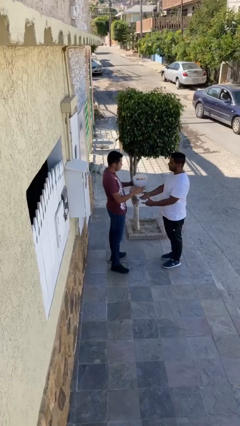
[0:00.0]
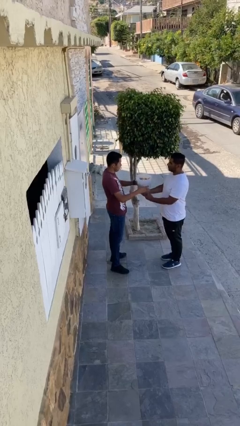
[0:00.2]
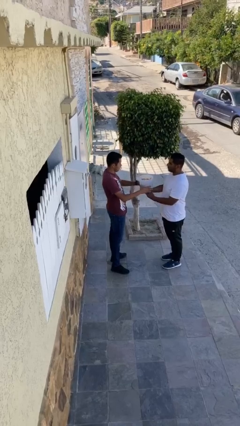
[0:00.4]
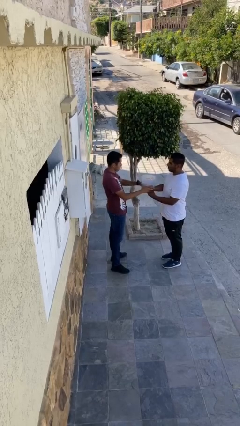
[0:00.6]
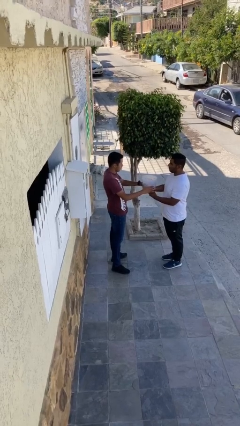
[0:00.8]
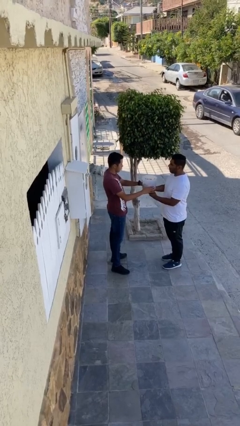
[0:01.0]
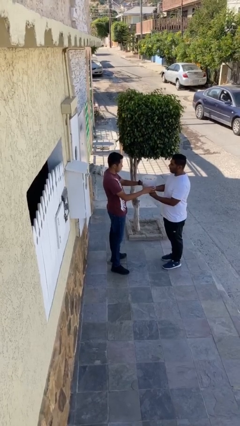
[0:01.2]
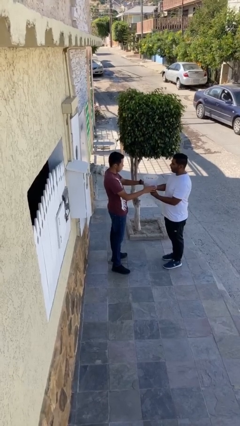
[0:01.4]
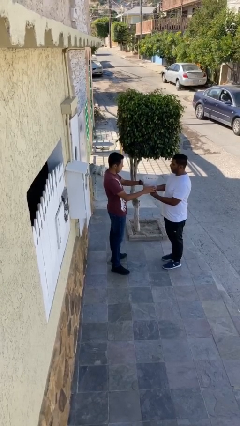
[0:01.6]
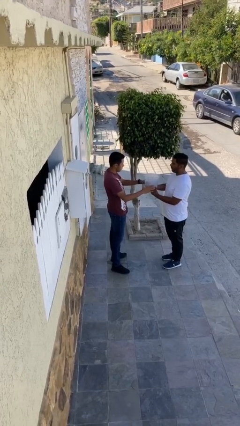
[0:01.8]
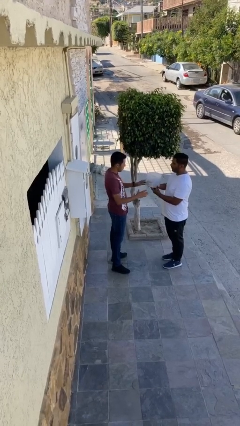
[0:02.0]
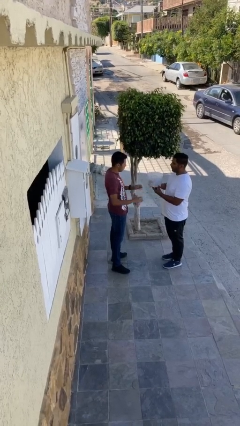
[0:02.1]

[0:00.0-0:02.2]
person transfers object to person

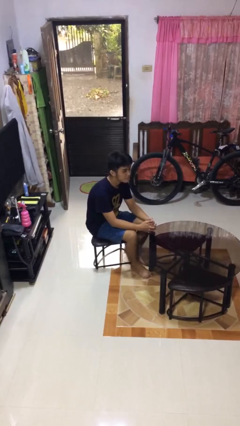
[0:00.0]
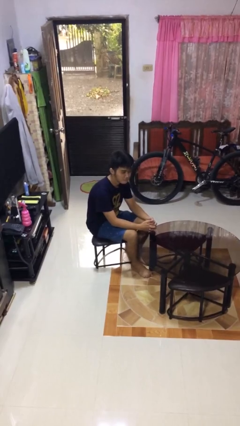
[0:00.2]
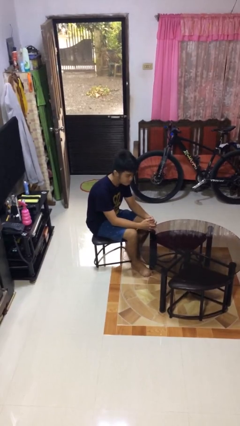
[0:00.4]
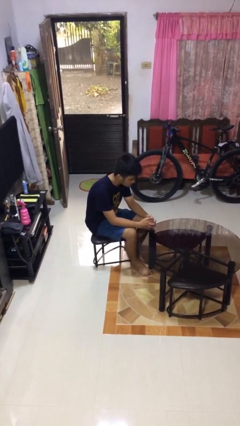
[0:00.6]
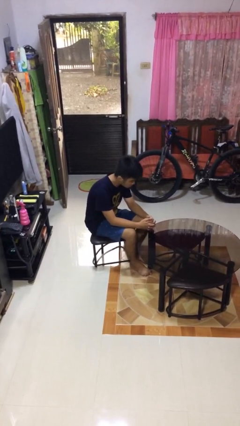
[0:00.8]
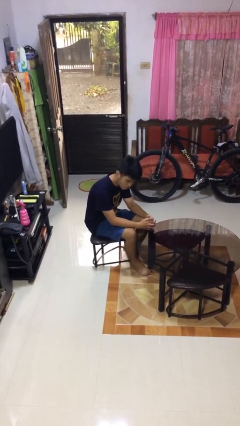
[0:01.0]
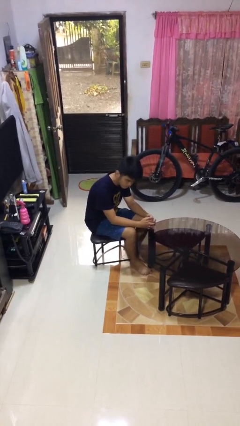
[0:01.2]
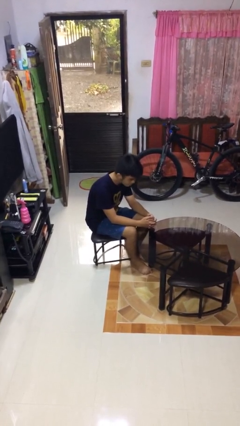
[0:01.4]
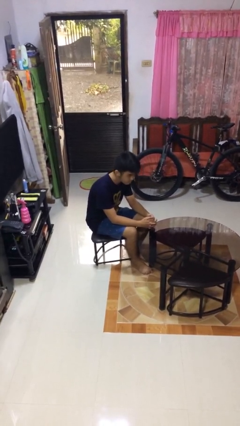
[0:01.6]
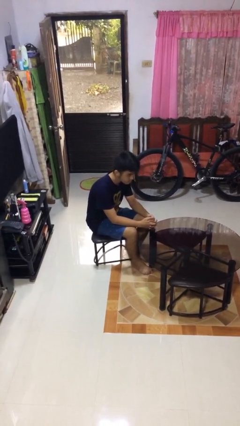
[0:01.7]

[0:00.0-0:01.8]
person shakes head

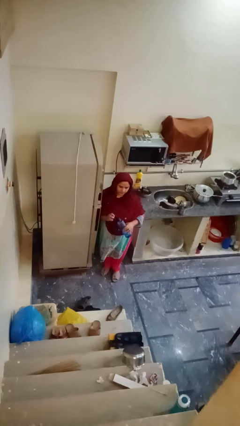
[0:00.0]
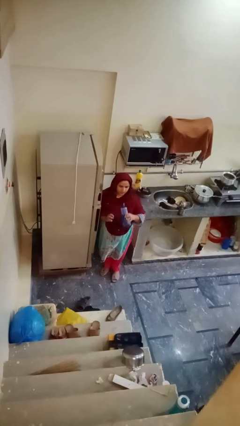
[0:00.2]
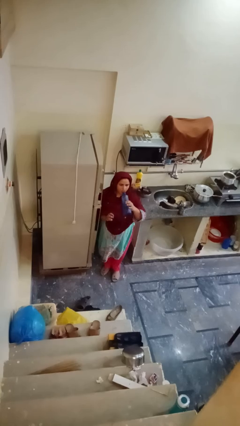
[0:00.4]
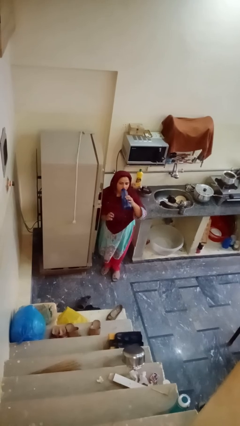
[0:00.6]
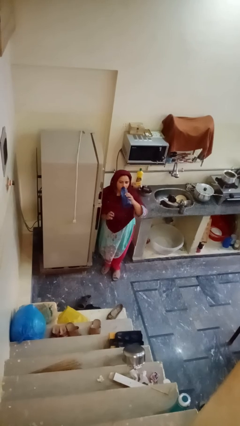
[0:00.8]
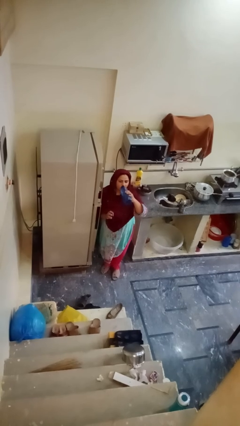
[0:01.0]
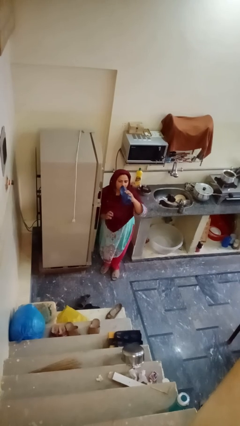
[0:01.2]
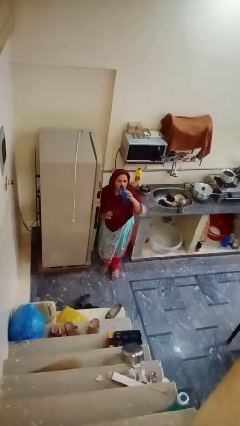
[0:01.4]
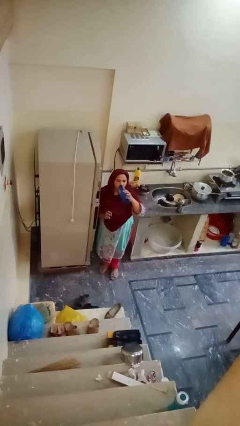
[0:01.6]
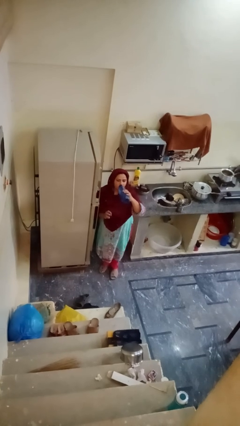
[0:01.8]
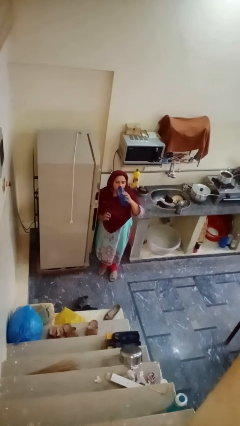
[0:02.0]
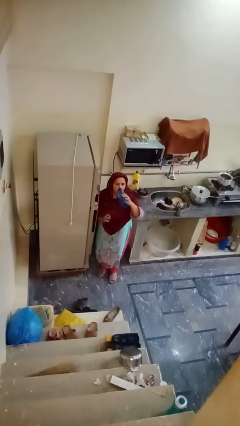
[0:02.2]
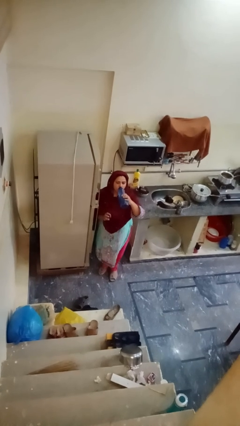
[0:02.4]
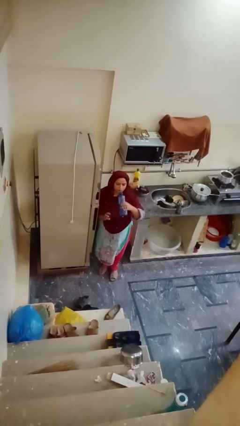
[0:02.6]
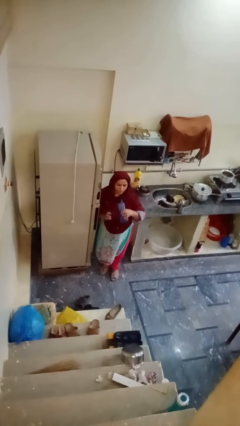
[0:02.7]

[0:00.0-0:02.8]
person drinks from bottle

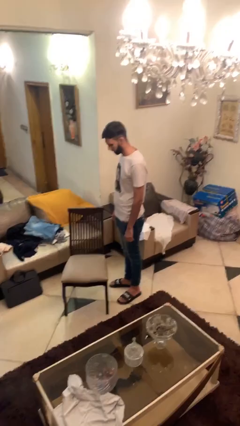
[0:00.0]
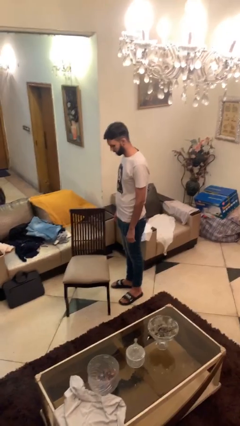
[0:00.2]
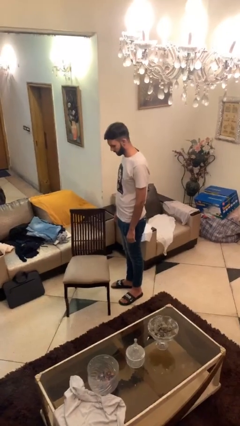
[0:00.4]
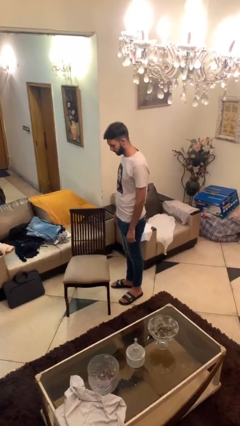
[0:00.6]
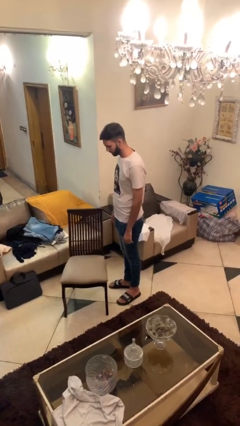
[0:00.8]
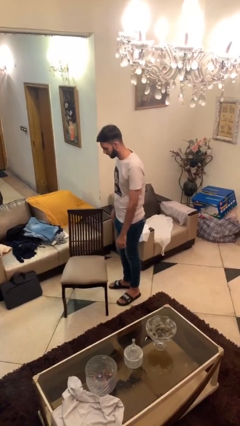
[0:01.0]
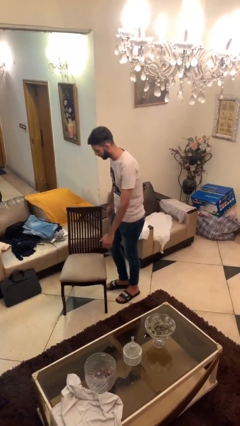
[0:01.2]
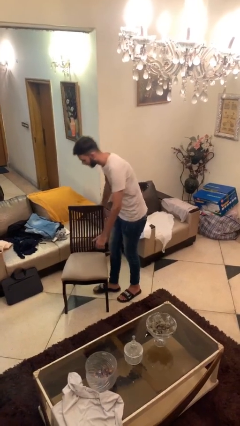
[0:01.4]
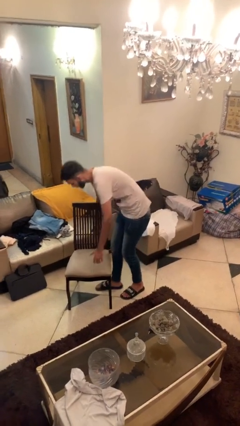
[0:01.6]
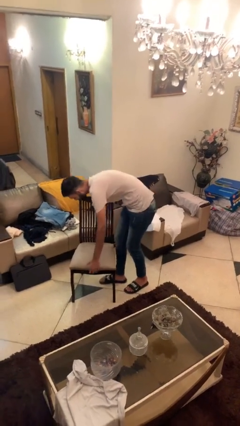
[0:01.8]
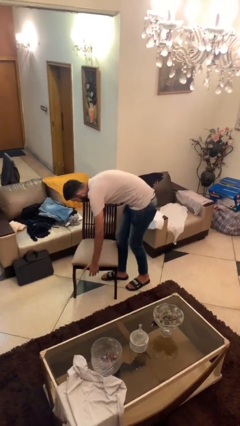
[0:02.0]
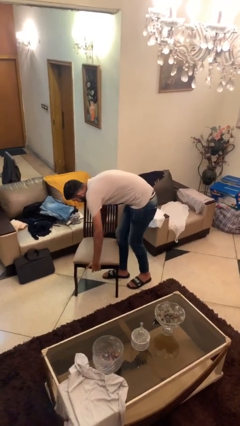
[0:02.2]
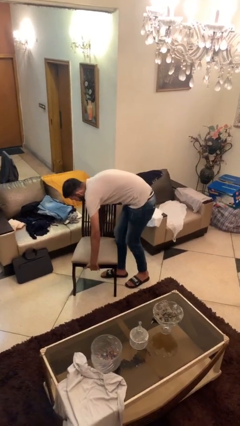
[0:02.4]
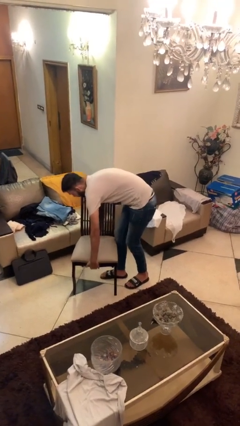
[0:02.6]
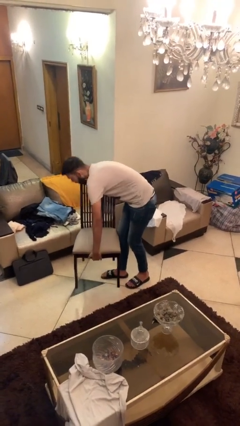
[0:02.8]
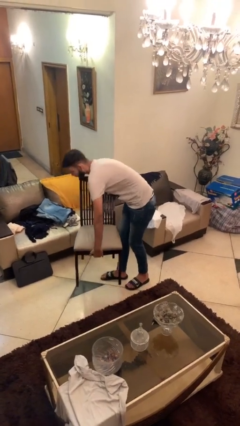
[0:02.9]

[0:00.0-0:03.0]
person picks up object from floor

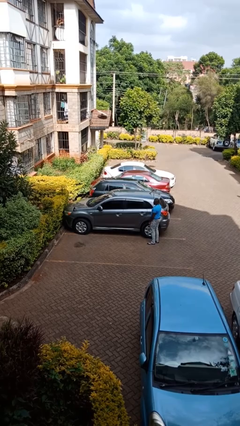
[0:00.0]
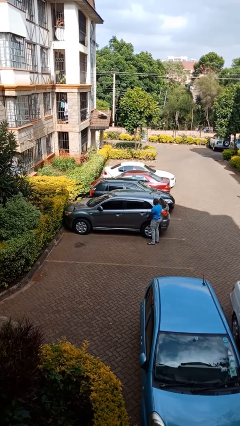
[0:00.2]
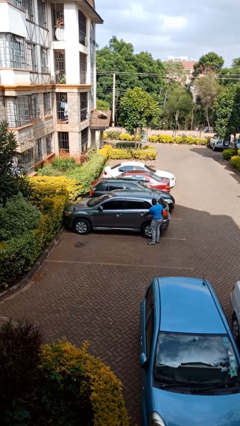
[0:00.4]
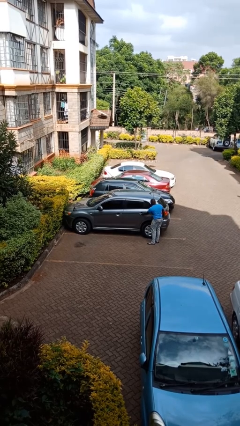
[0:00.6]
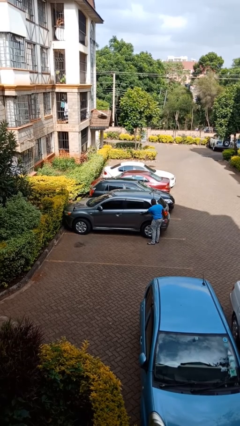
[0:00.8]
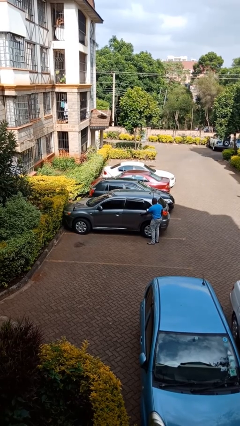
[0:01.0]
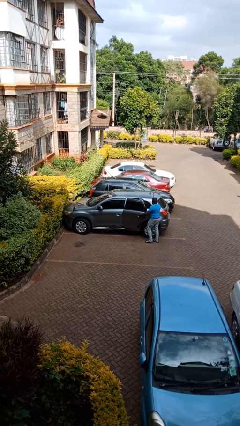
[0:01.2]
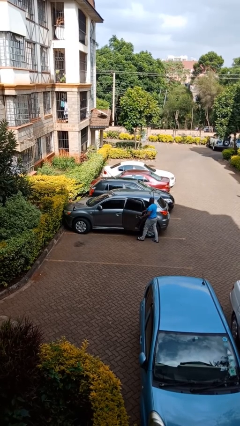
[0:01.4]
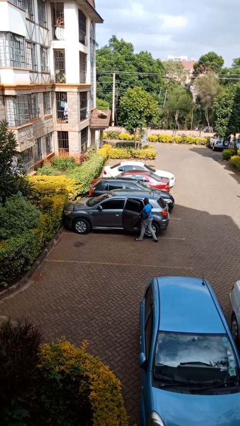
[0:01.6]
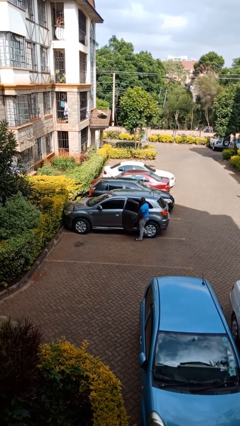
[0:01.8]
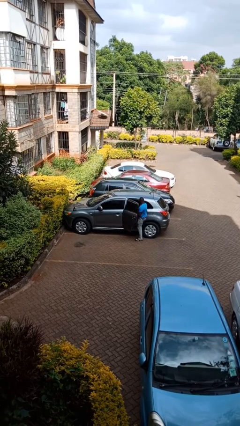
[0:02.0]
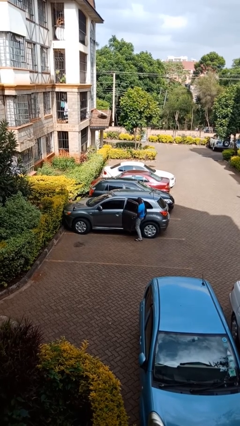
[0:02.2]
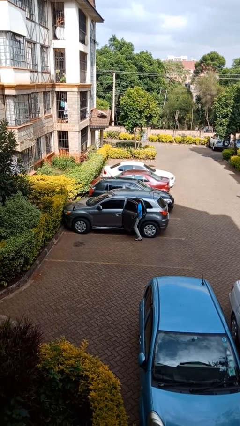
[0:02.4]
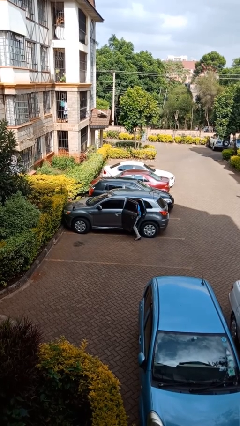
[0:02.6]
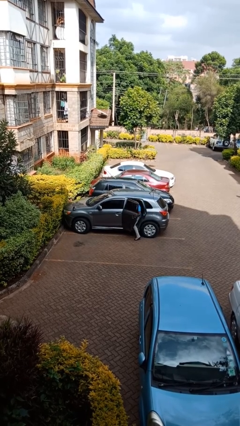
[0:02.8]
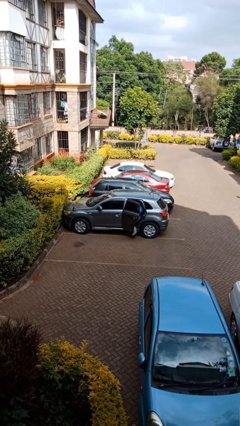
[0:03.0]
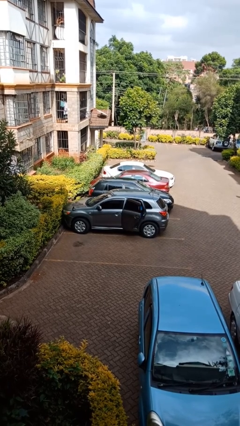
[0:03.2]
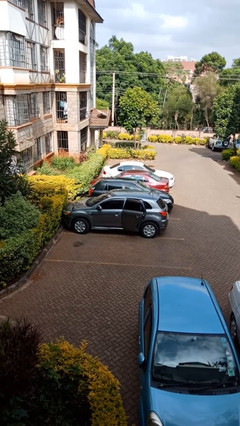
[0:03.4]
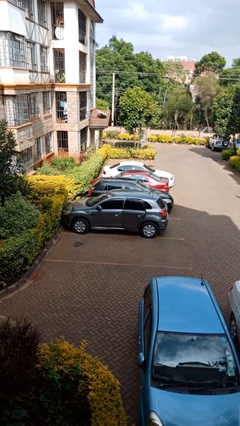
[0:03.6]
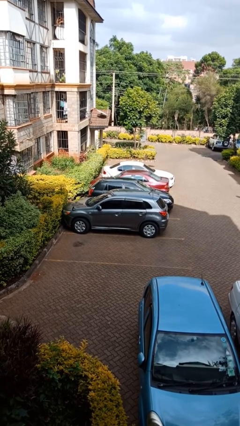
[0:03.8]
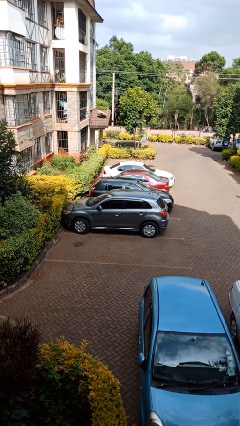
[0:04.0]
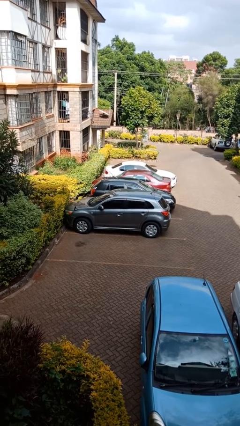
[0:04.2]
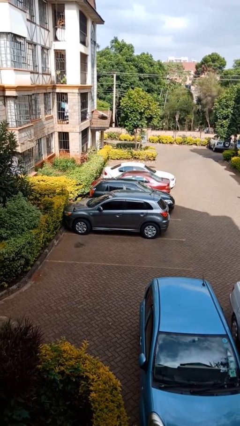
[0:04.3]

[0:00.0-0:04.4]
car picks up person

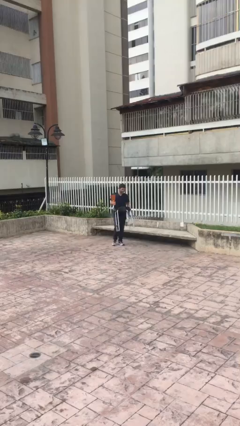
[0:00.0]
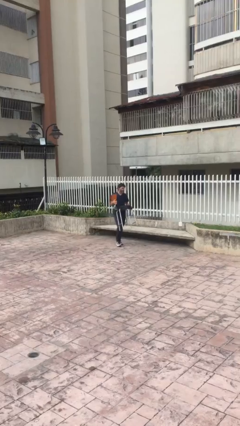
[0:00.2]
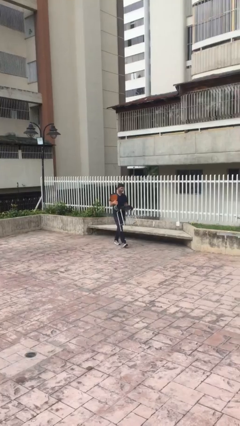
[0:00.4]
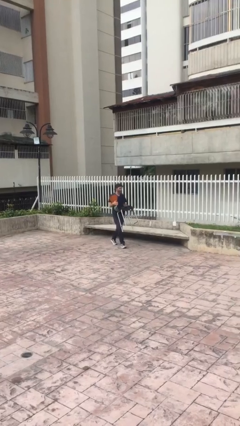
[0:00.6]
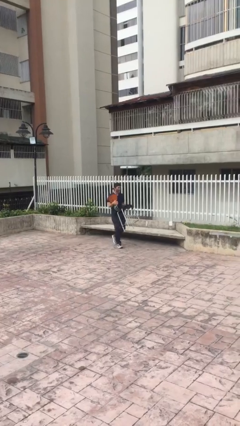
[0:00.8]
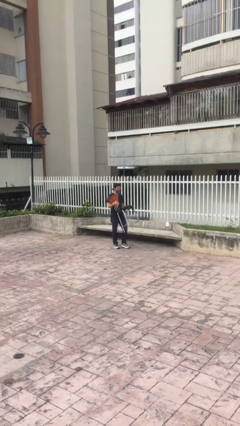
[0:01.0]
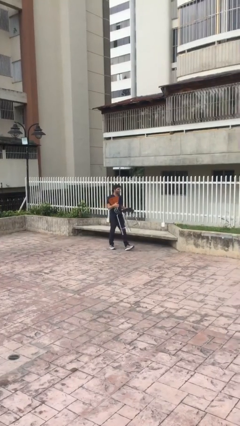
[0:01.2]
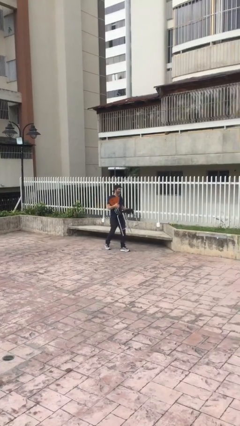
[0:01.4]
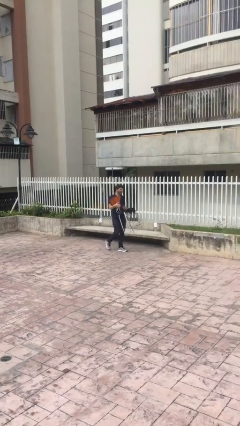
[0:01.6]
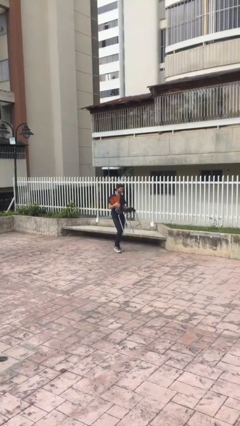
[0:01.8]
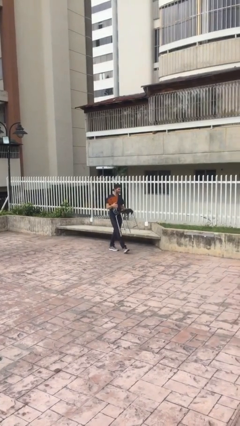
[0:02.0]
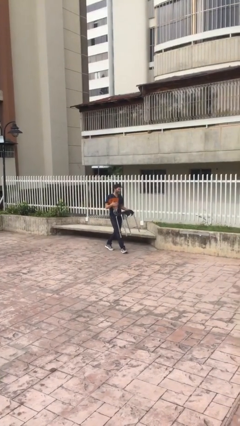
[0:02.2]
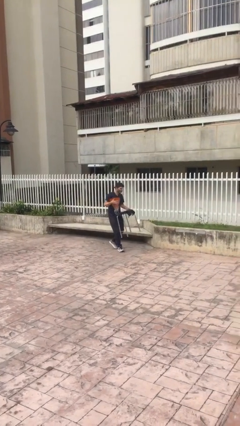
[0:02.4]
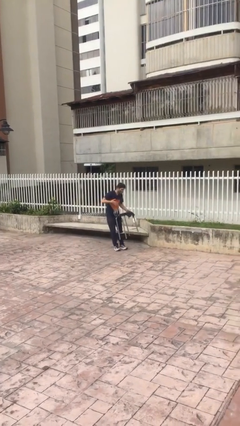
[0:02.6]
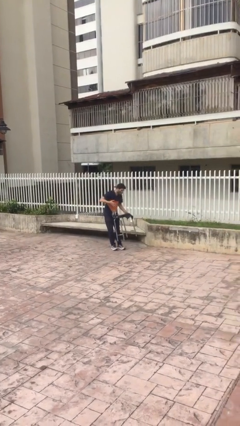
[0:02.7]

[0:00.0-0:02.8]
person carries heavy object

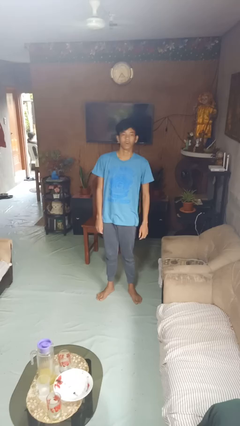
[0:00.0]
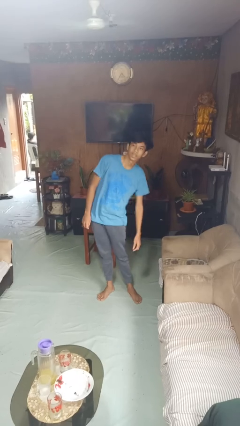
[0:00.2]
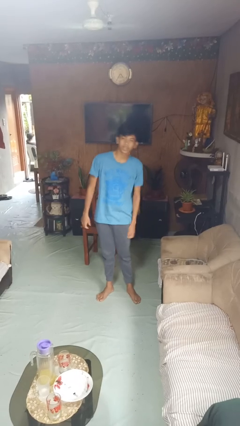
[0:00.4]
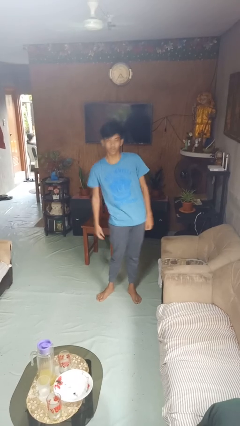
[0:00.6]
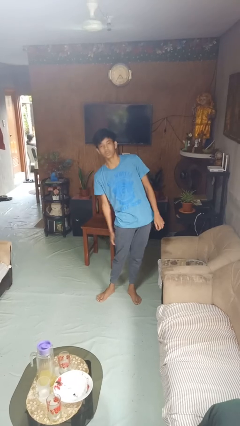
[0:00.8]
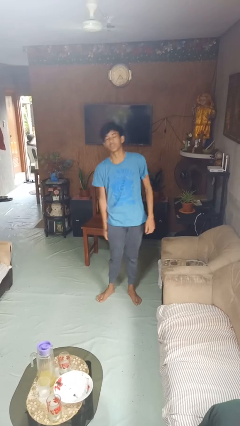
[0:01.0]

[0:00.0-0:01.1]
person dances in place
